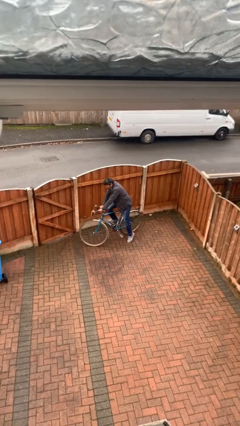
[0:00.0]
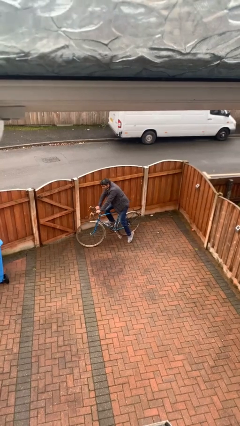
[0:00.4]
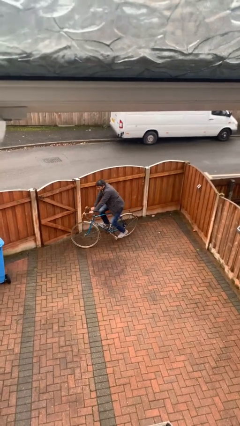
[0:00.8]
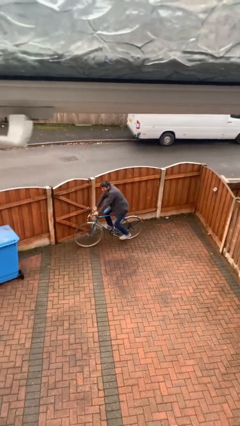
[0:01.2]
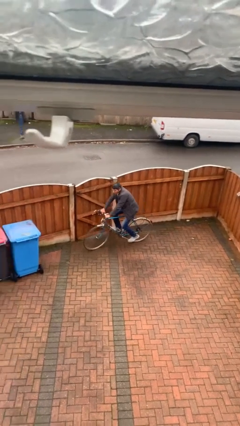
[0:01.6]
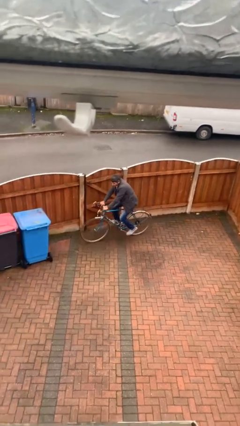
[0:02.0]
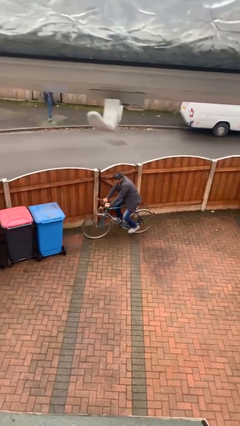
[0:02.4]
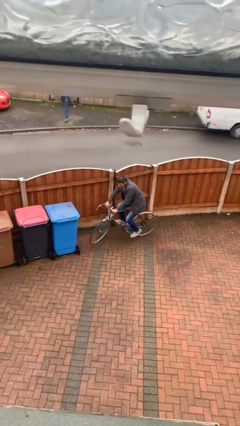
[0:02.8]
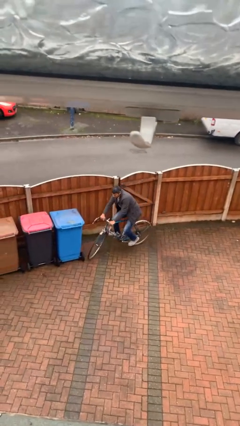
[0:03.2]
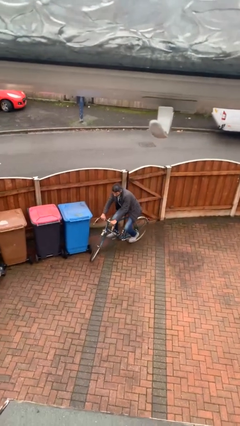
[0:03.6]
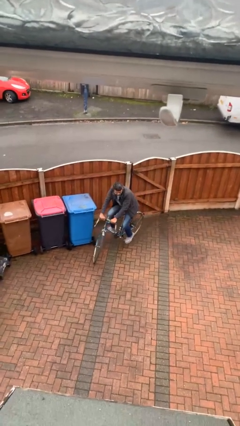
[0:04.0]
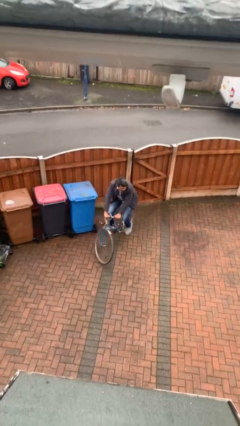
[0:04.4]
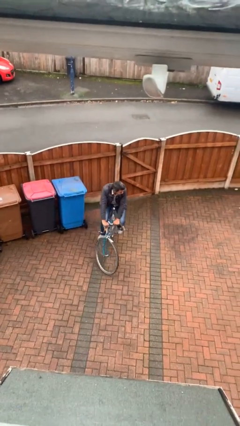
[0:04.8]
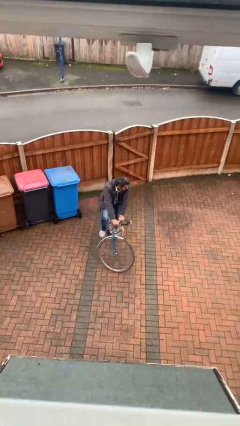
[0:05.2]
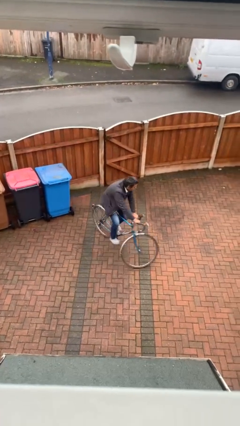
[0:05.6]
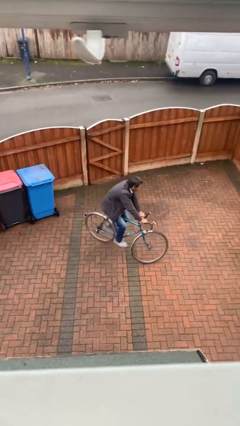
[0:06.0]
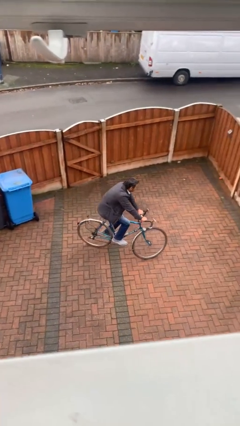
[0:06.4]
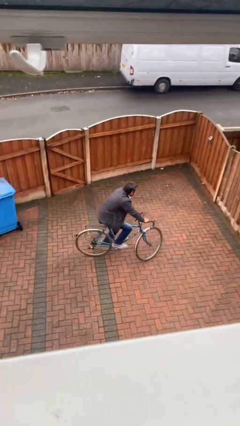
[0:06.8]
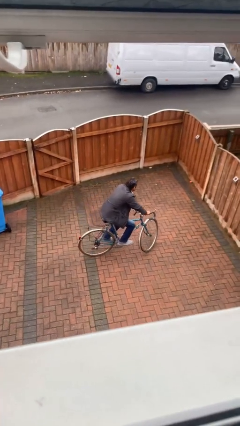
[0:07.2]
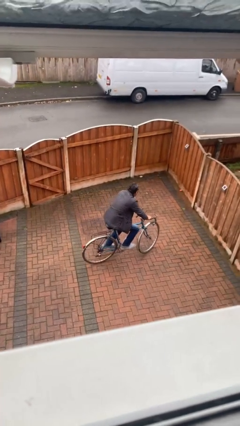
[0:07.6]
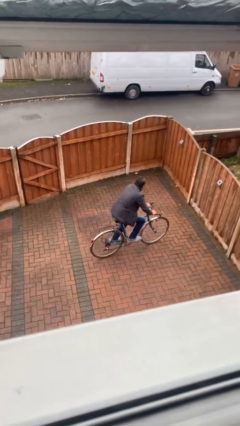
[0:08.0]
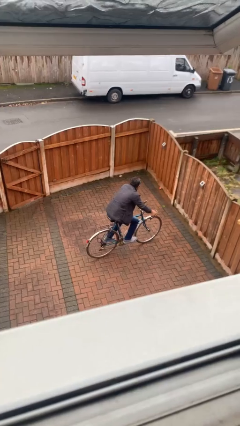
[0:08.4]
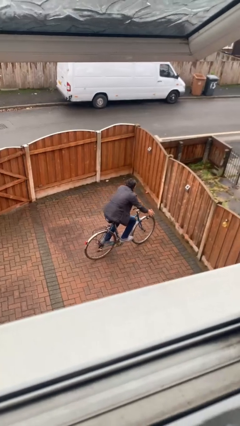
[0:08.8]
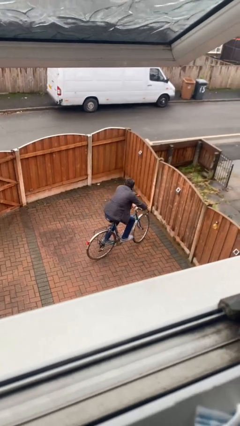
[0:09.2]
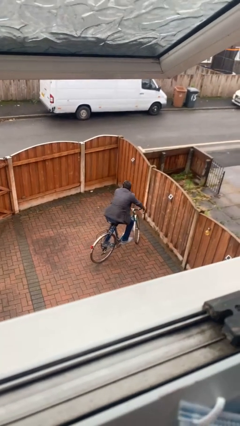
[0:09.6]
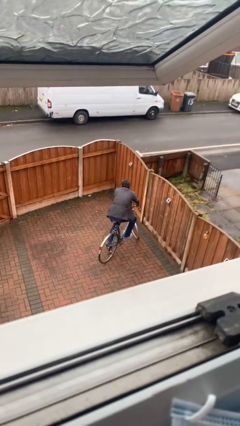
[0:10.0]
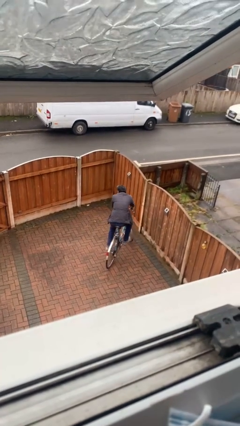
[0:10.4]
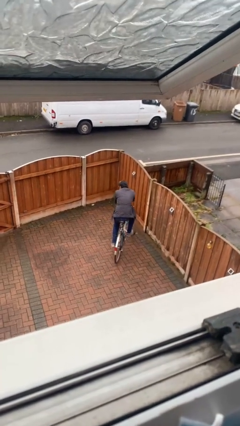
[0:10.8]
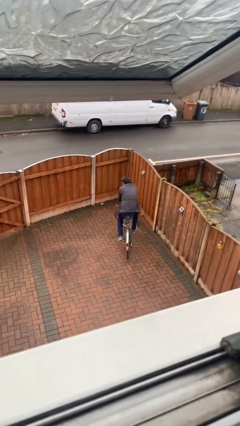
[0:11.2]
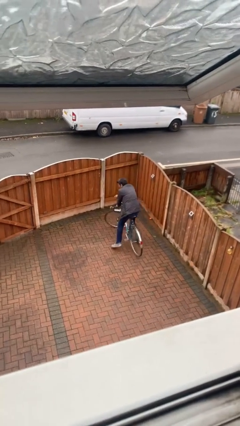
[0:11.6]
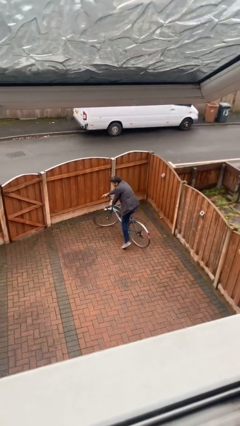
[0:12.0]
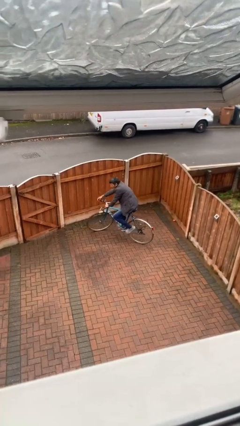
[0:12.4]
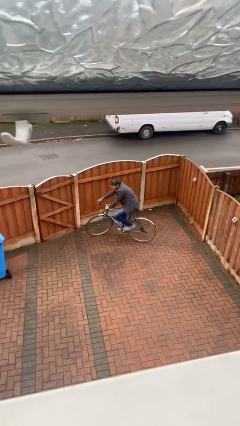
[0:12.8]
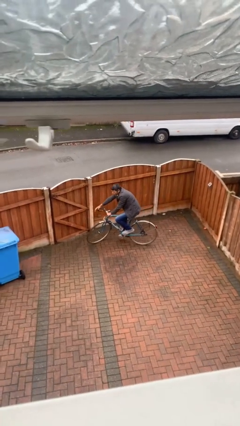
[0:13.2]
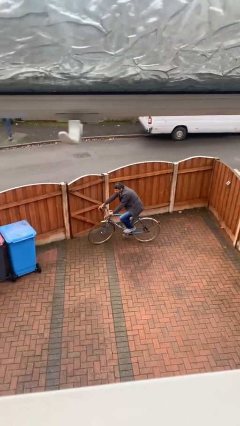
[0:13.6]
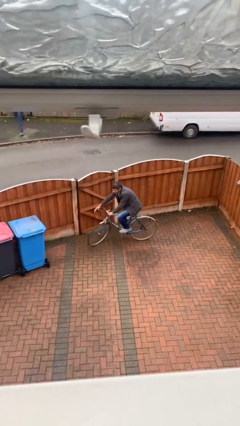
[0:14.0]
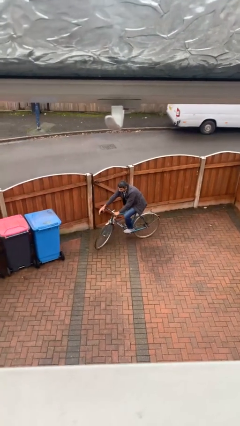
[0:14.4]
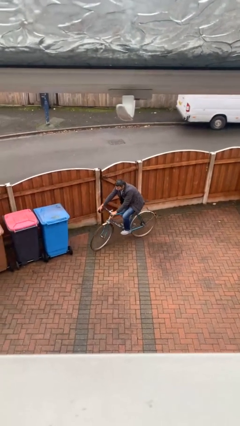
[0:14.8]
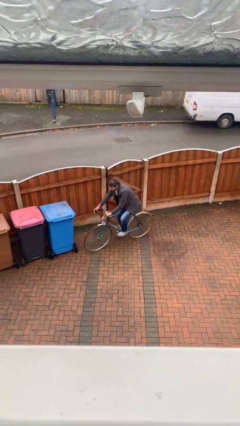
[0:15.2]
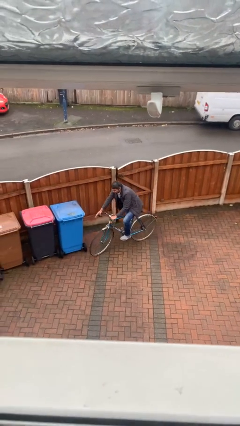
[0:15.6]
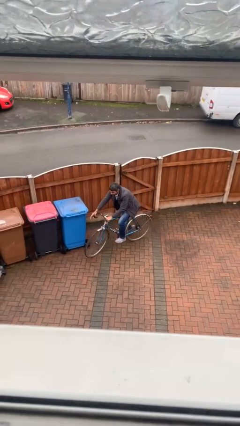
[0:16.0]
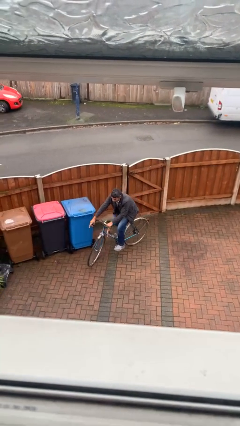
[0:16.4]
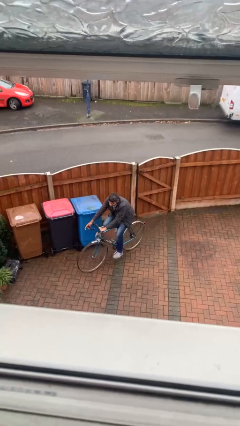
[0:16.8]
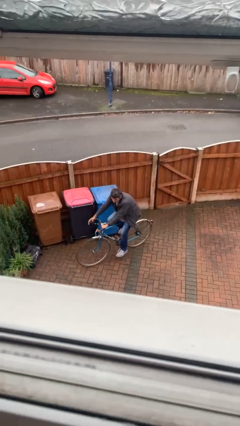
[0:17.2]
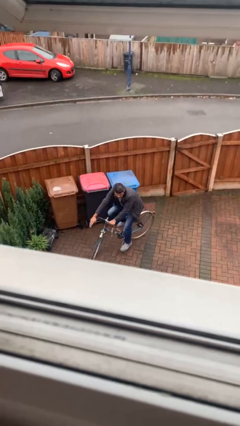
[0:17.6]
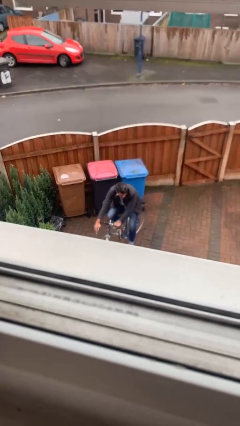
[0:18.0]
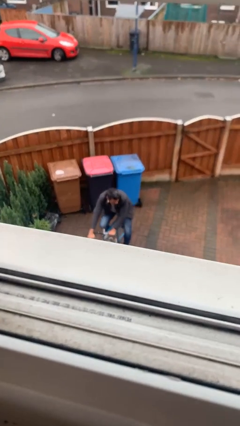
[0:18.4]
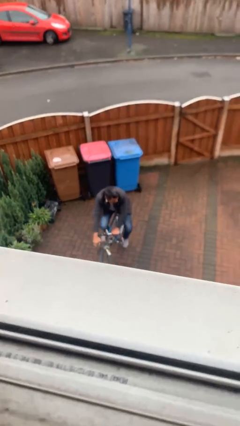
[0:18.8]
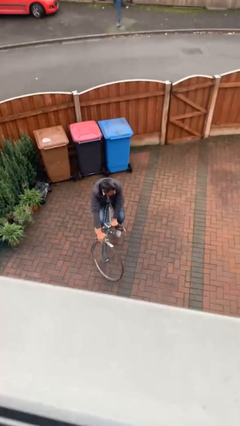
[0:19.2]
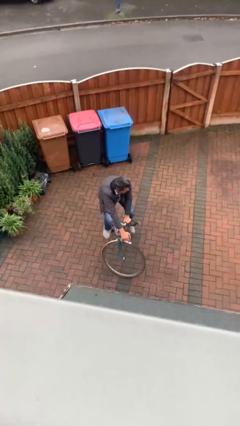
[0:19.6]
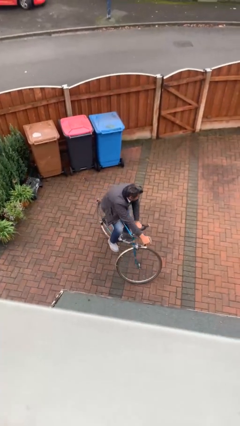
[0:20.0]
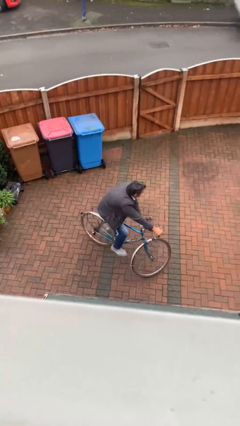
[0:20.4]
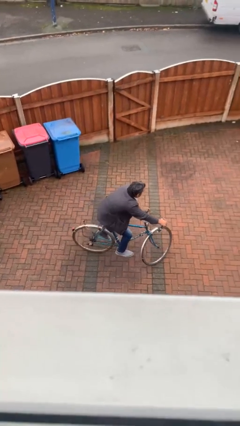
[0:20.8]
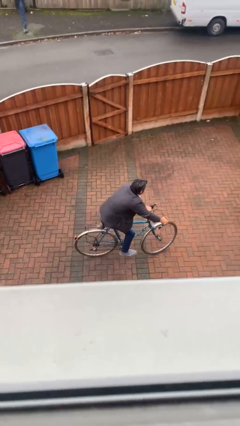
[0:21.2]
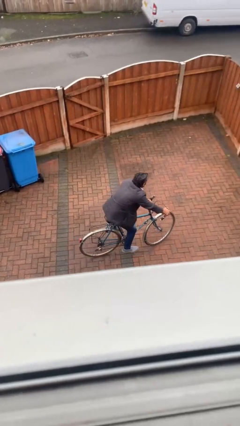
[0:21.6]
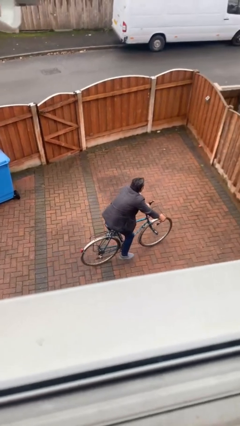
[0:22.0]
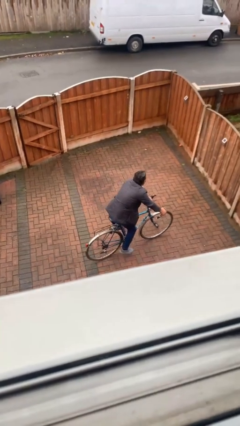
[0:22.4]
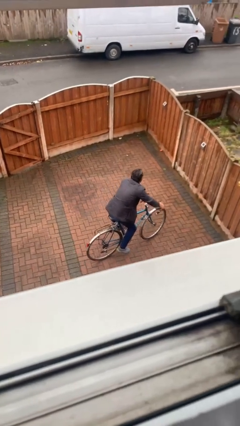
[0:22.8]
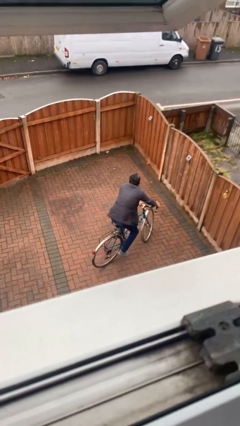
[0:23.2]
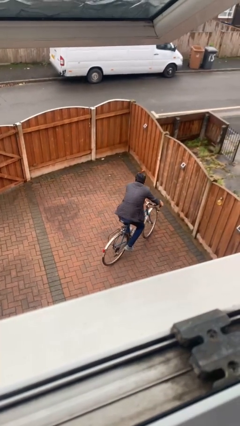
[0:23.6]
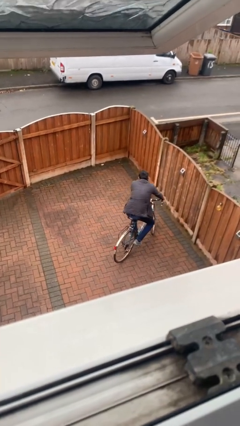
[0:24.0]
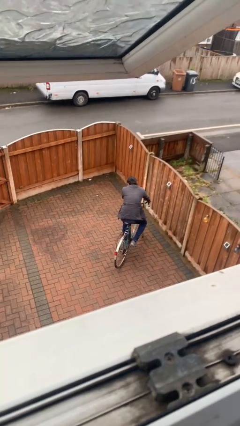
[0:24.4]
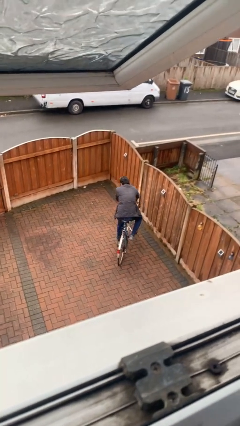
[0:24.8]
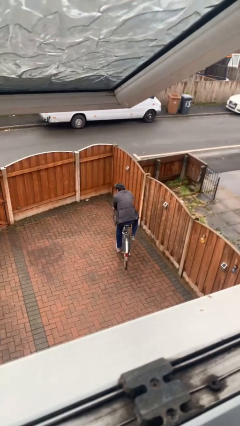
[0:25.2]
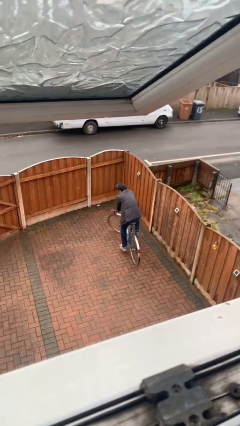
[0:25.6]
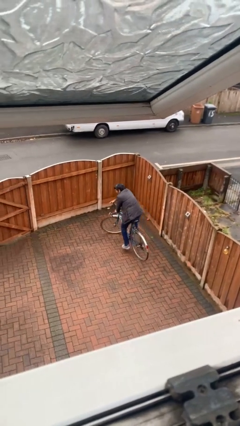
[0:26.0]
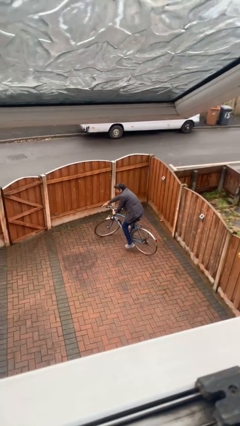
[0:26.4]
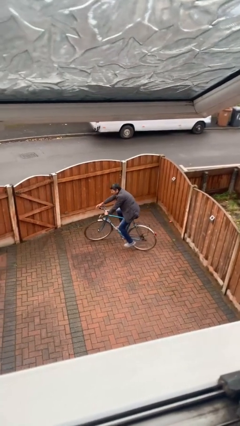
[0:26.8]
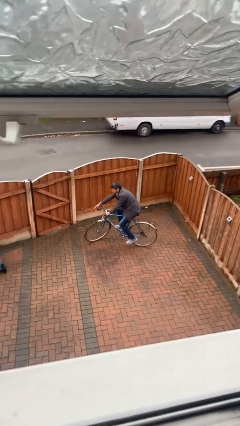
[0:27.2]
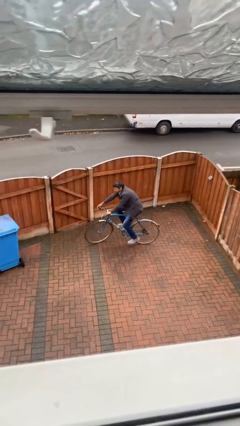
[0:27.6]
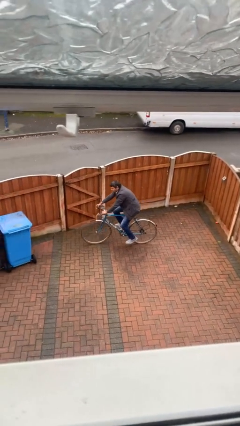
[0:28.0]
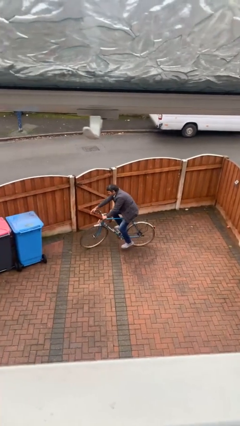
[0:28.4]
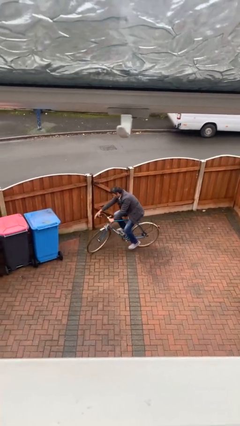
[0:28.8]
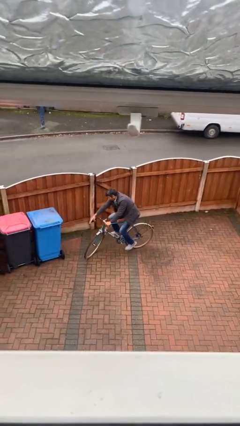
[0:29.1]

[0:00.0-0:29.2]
person rides bicycle

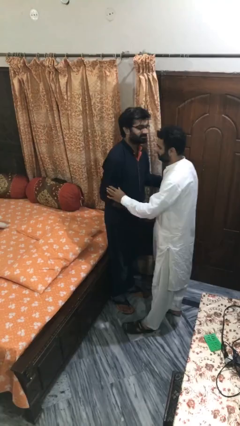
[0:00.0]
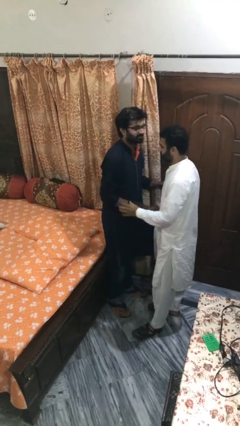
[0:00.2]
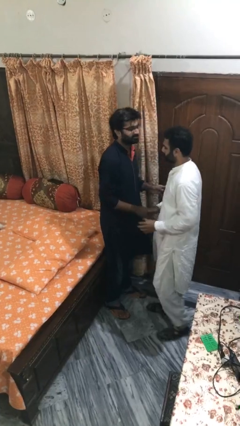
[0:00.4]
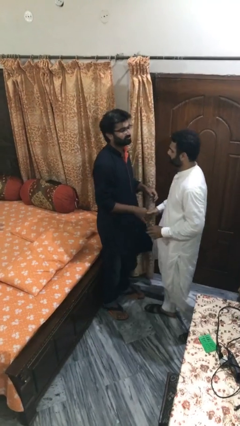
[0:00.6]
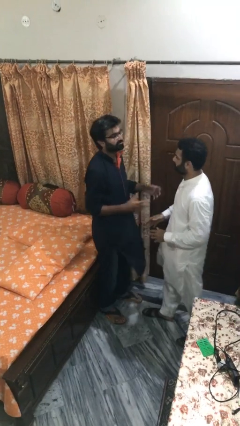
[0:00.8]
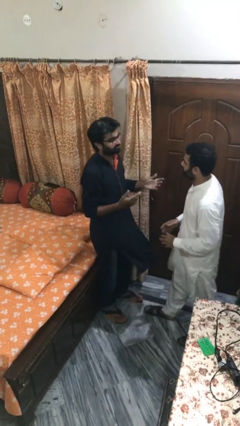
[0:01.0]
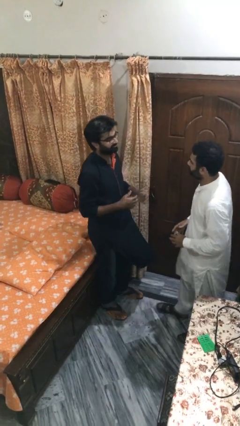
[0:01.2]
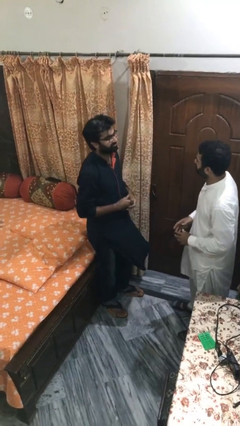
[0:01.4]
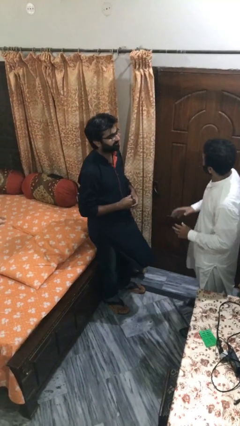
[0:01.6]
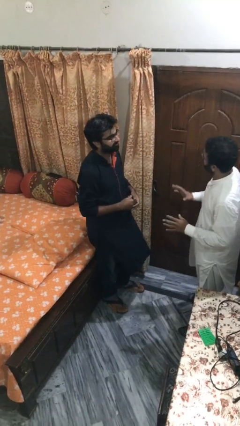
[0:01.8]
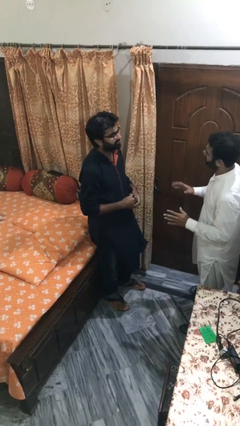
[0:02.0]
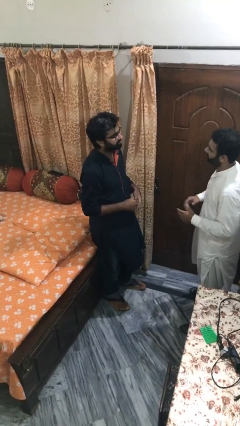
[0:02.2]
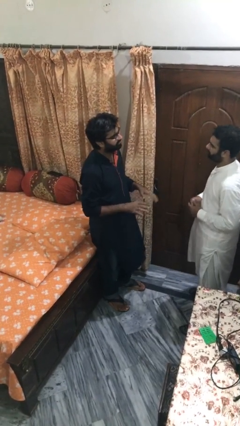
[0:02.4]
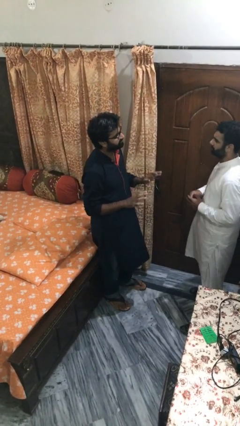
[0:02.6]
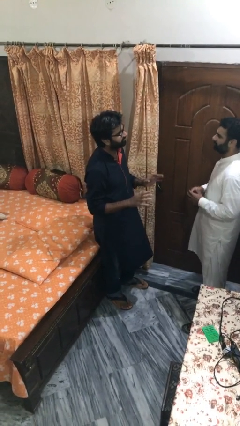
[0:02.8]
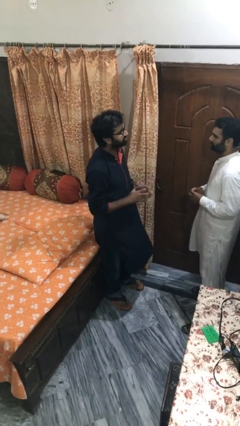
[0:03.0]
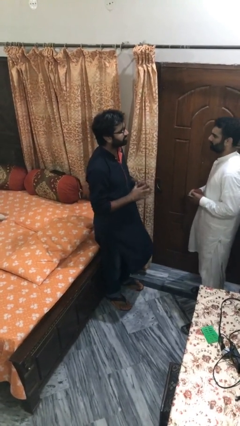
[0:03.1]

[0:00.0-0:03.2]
person talks to person

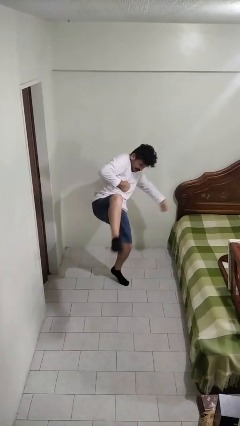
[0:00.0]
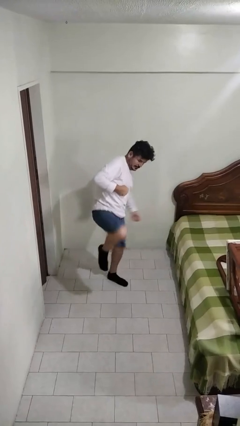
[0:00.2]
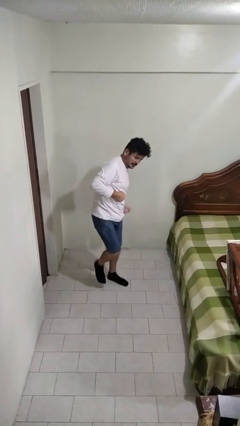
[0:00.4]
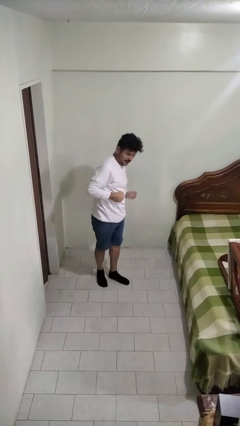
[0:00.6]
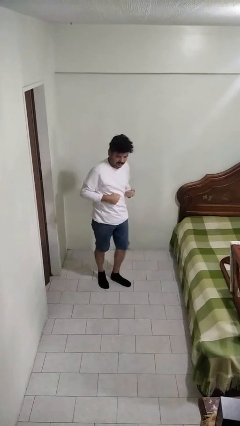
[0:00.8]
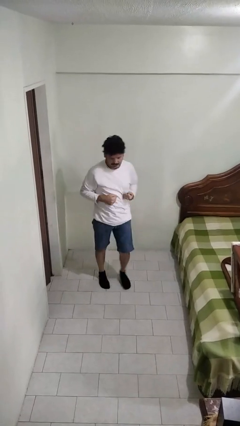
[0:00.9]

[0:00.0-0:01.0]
person karate kicks
